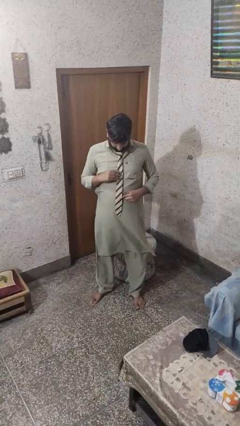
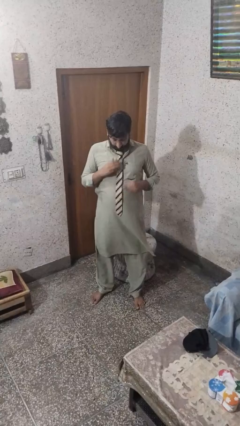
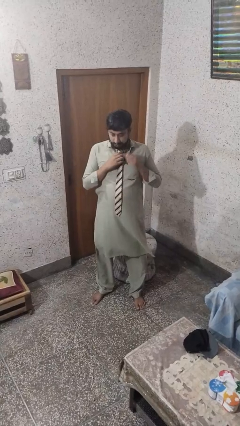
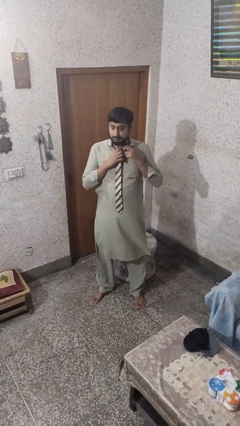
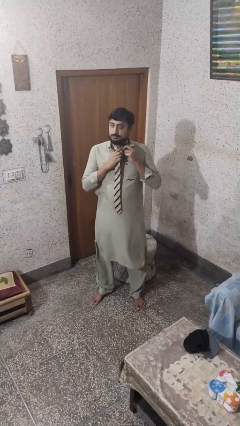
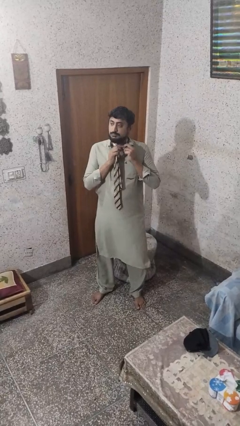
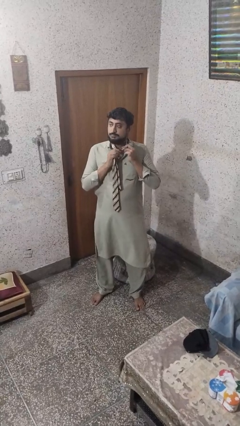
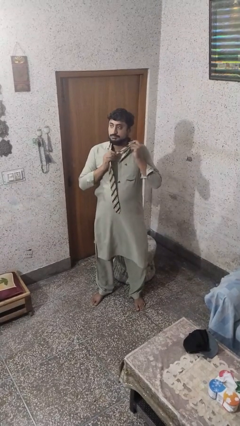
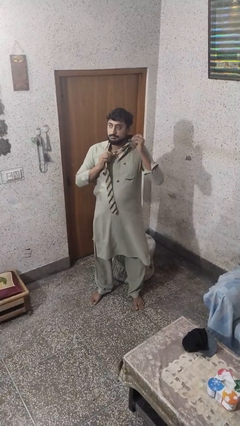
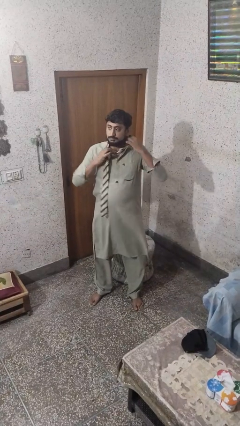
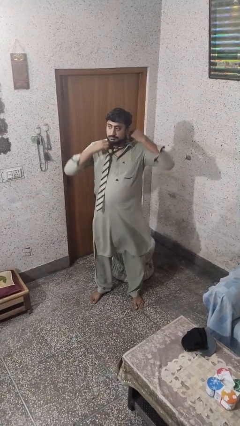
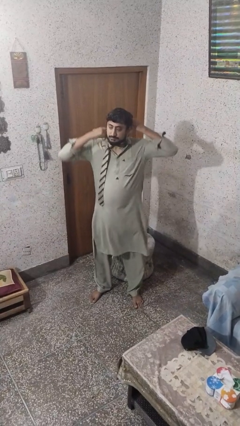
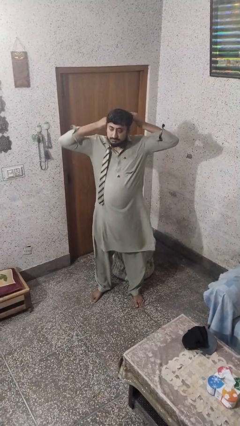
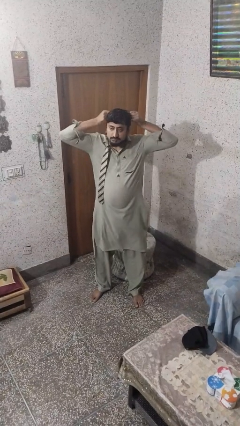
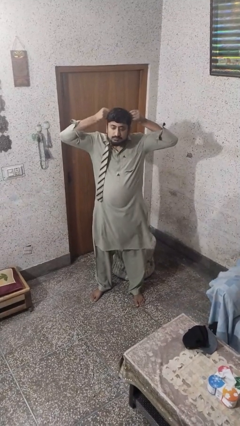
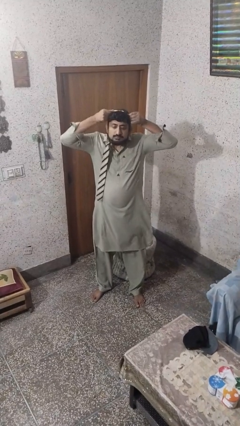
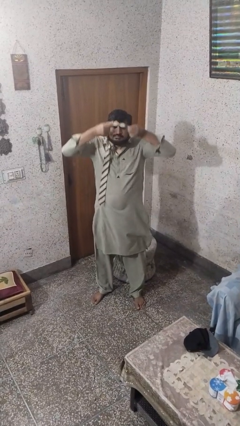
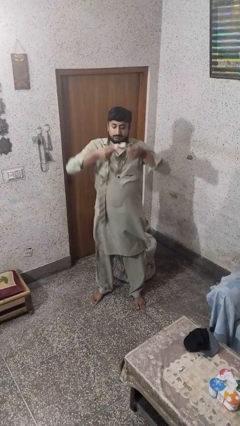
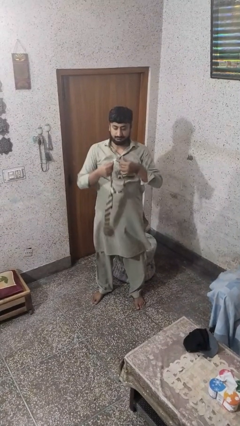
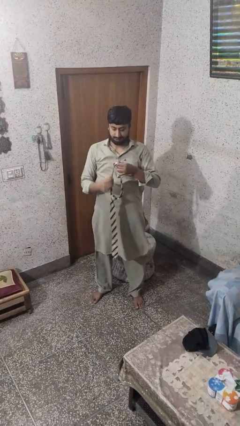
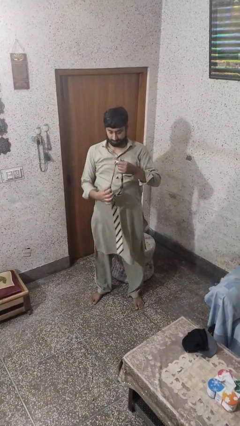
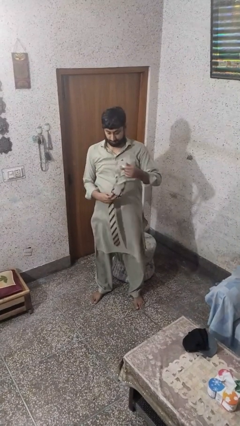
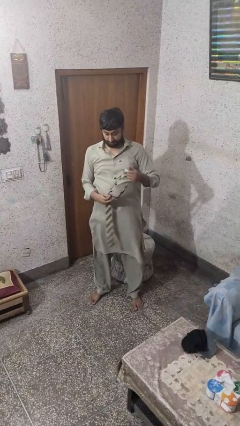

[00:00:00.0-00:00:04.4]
person takes off necktie

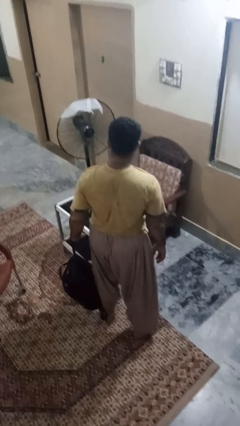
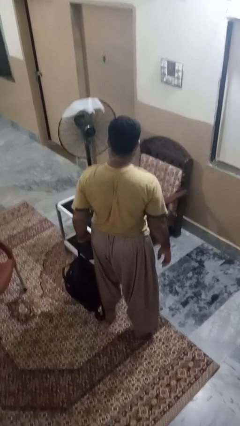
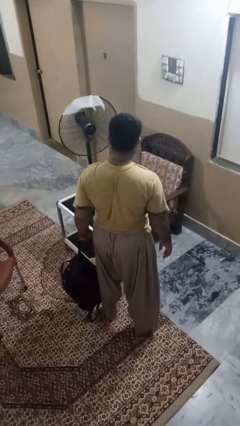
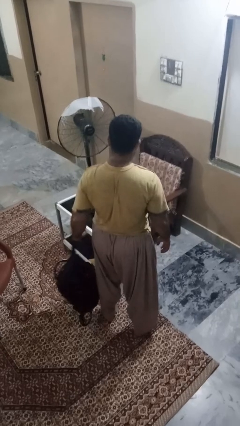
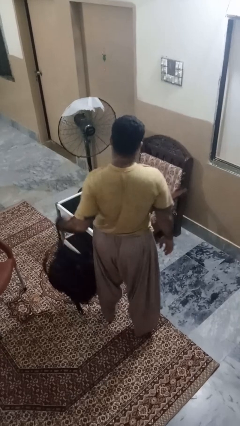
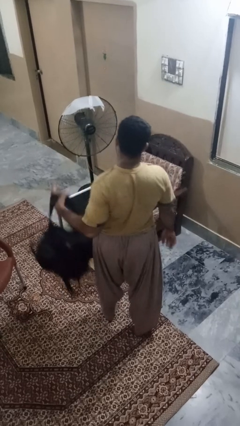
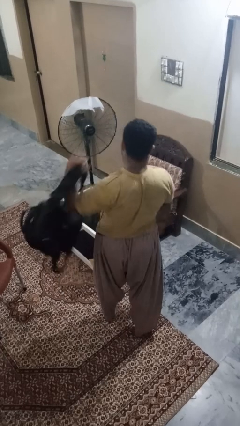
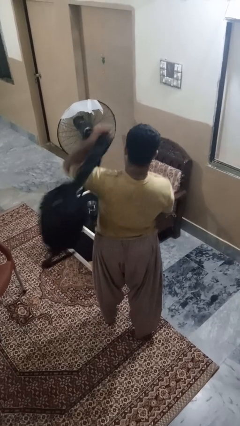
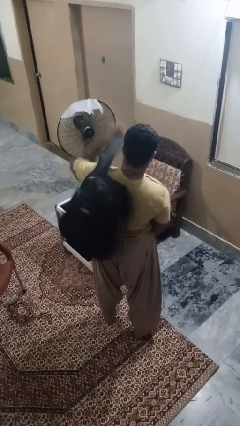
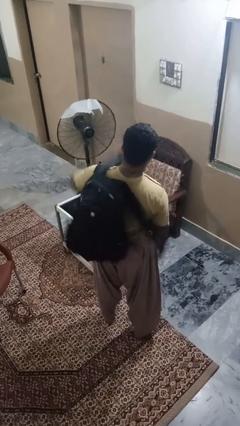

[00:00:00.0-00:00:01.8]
person puts on backpack

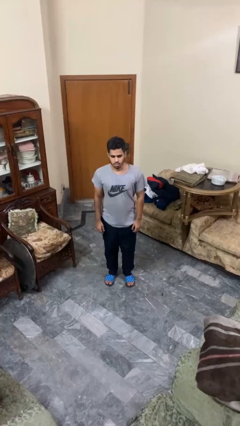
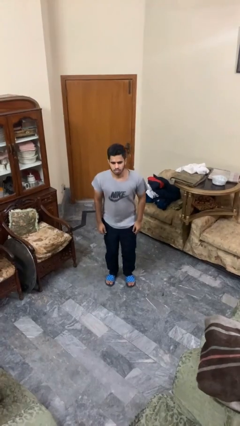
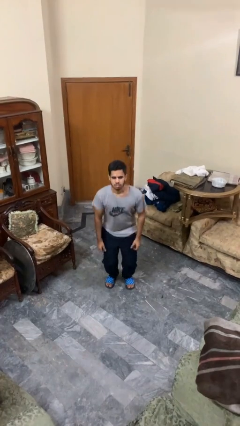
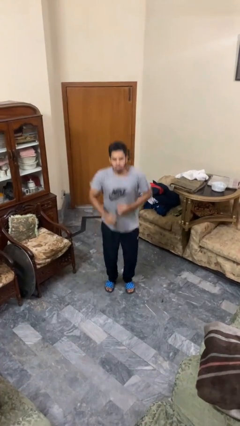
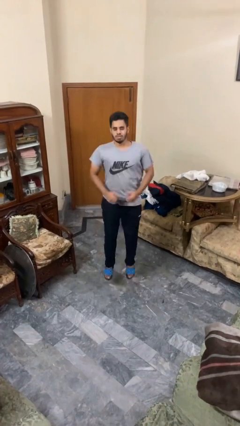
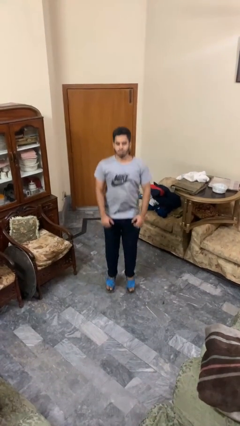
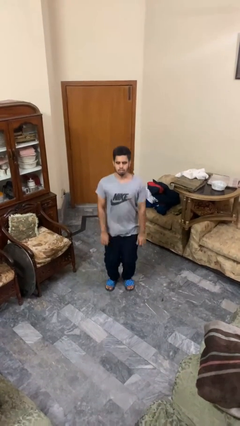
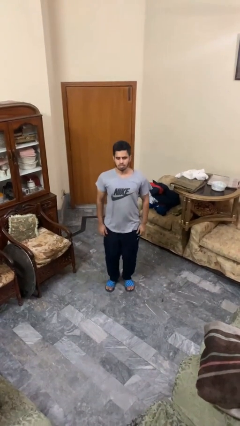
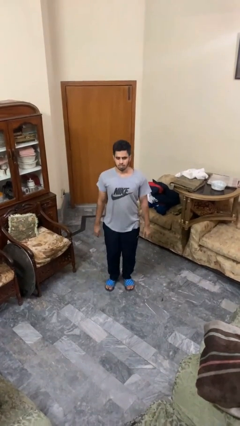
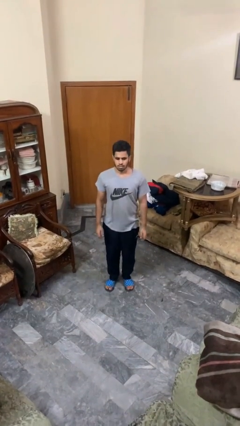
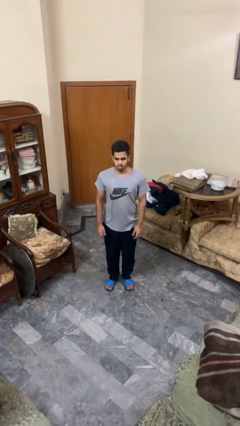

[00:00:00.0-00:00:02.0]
person jumps

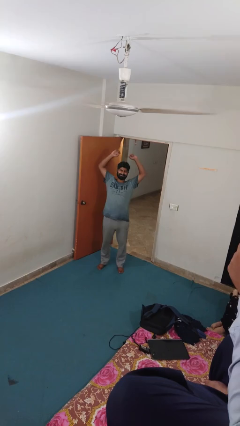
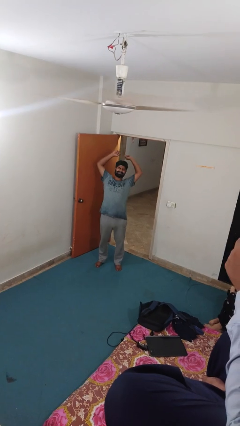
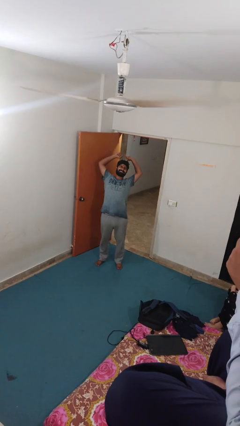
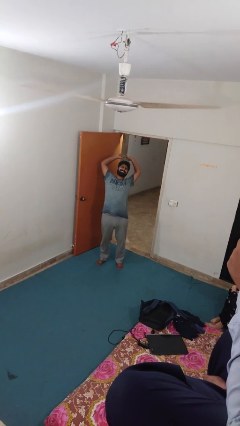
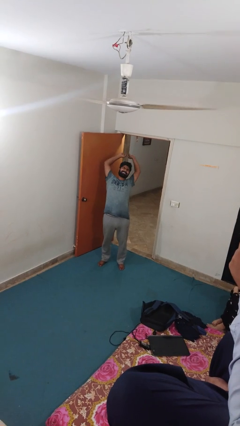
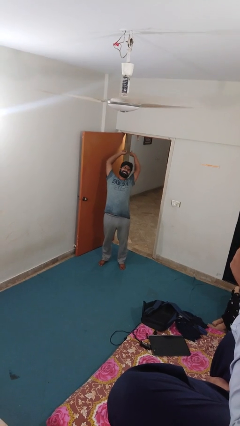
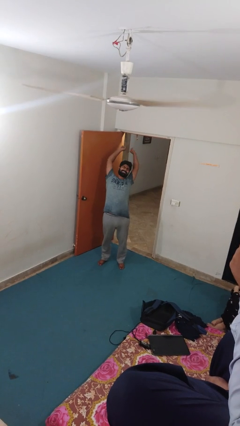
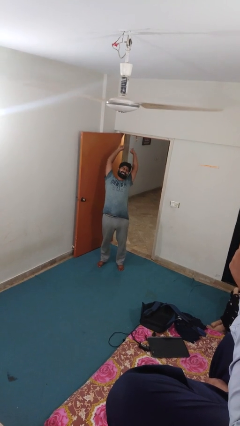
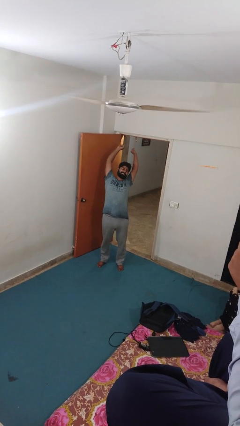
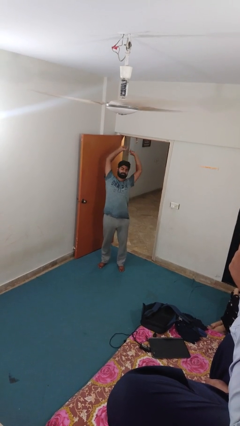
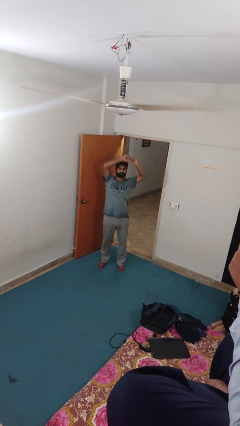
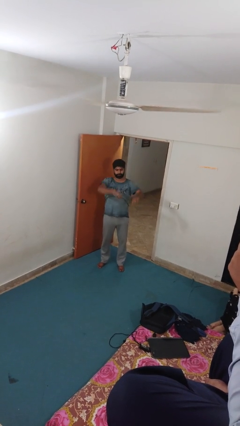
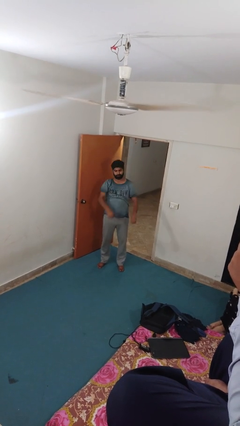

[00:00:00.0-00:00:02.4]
person stretches arms over head

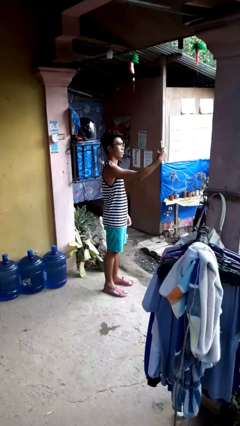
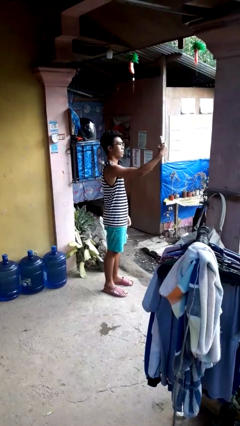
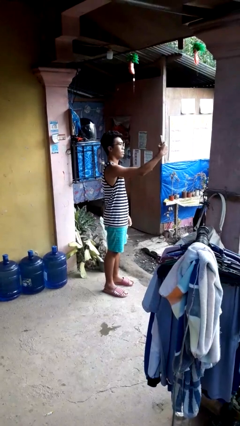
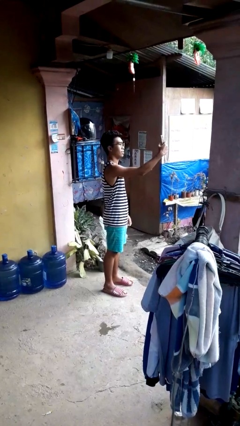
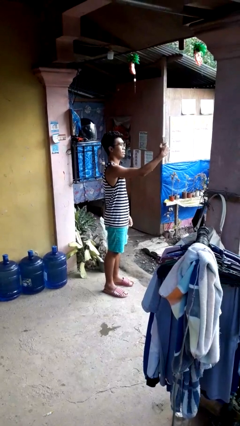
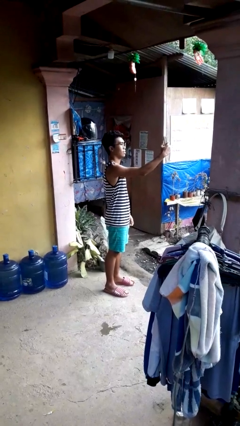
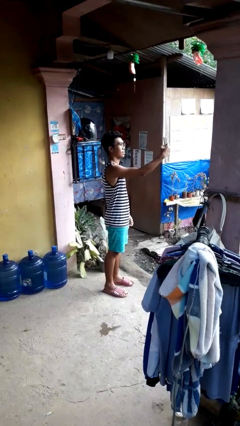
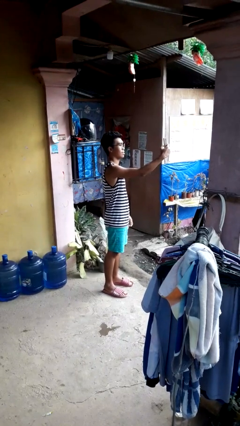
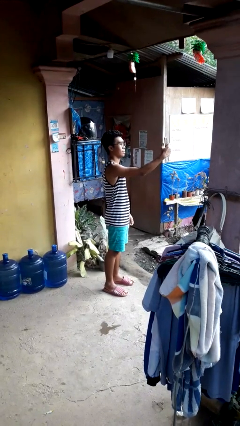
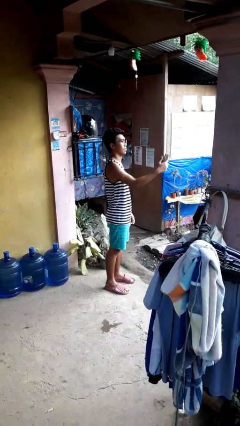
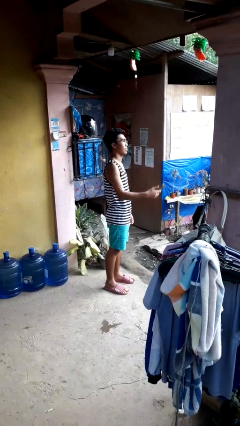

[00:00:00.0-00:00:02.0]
person takes selfie

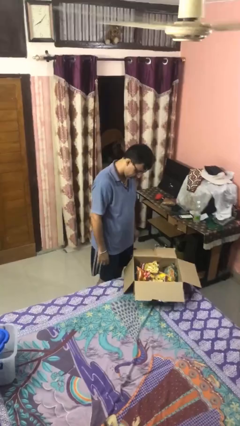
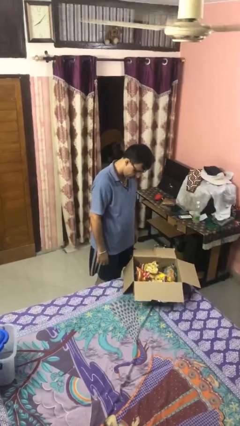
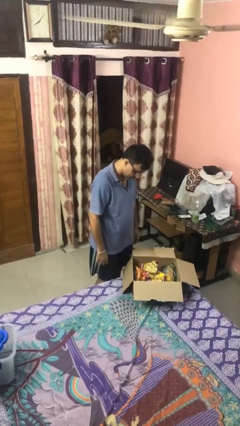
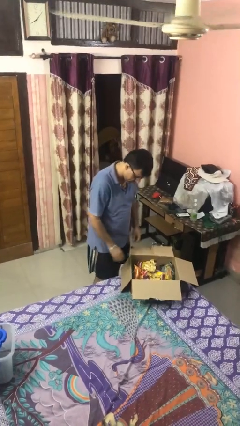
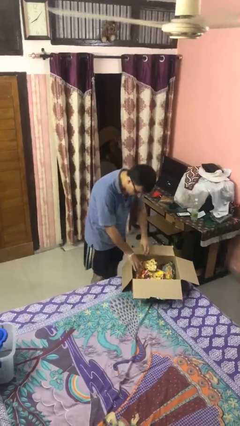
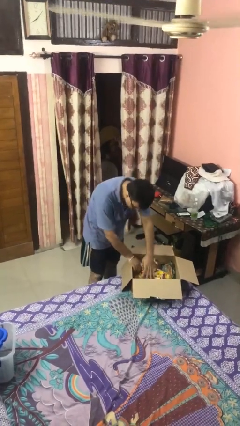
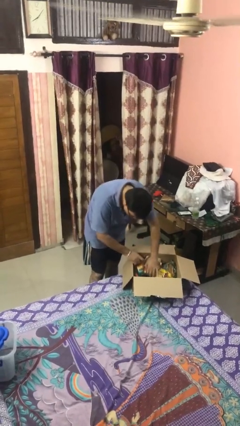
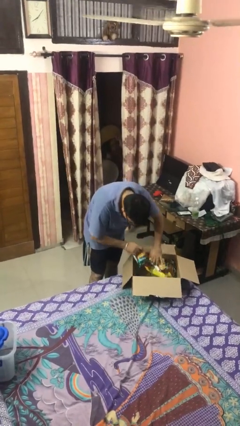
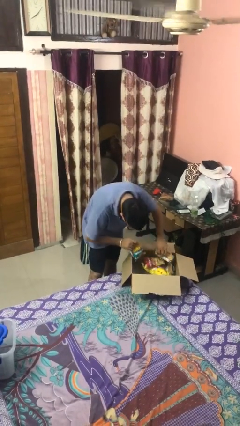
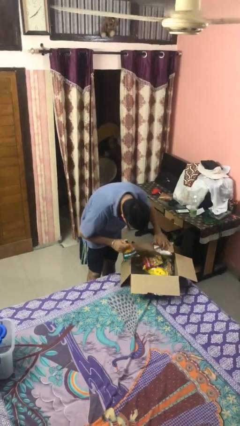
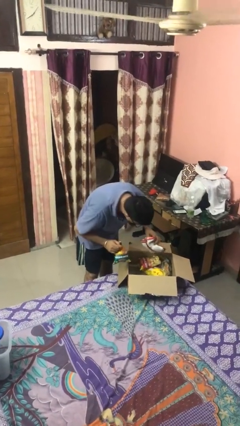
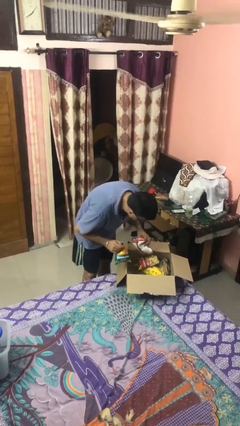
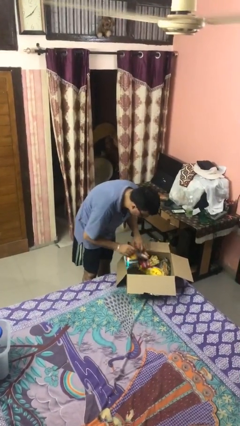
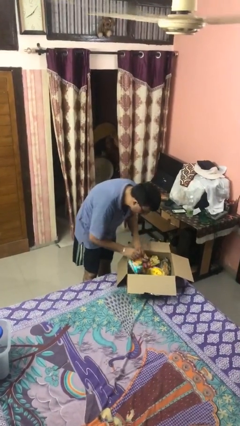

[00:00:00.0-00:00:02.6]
person searches in box

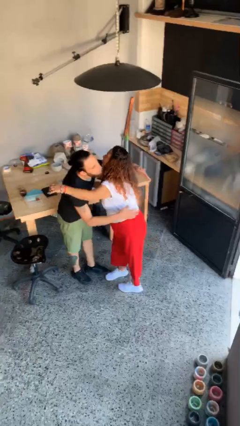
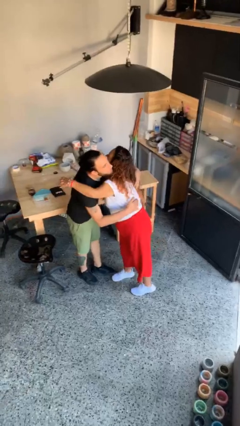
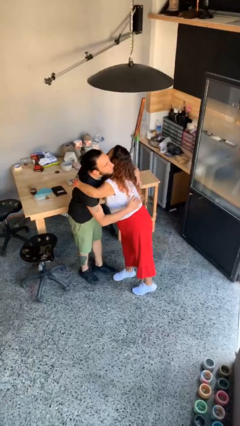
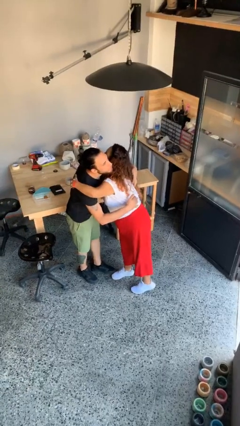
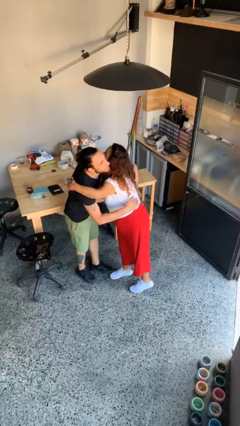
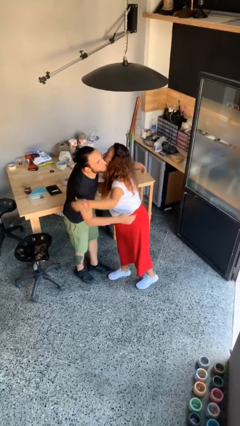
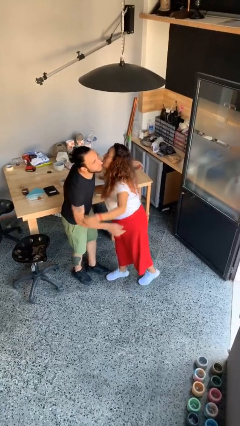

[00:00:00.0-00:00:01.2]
person embraces person

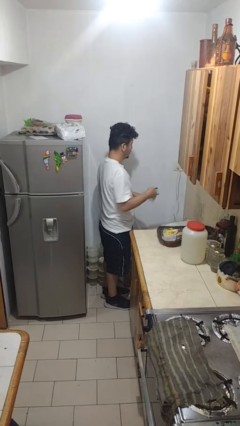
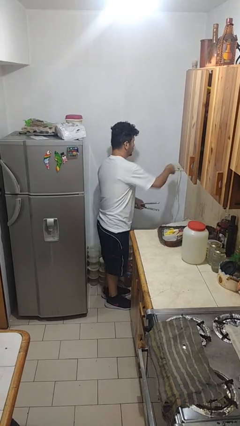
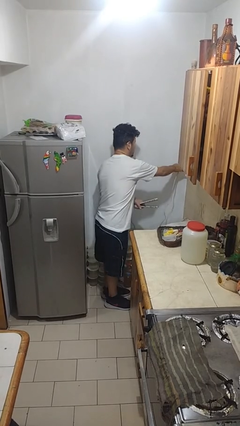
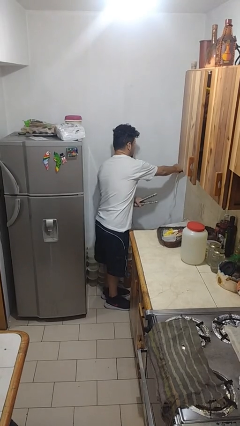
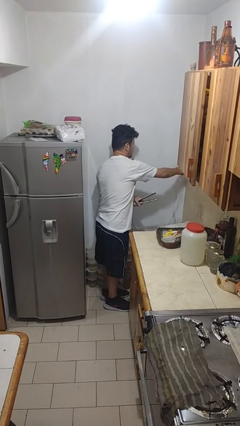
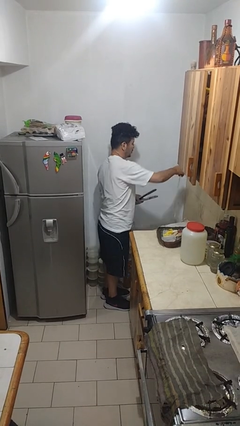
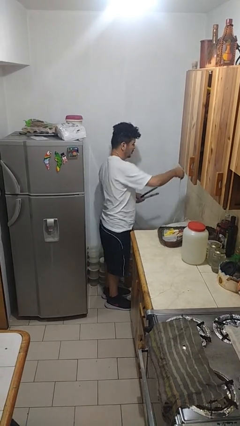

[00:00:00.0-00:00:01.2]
person unplugs from electrical socket
